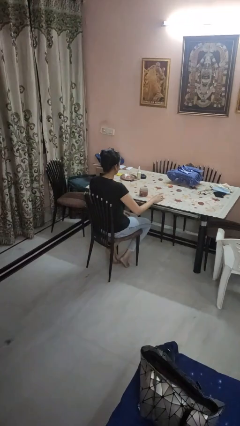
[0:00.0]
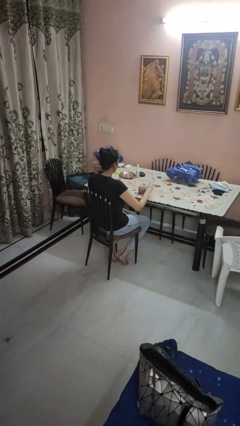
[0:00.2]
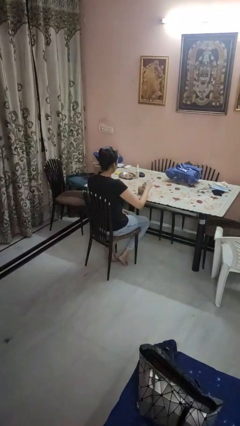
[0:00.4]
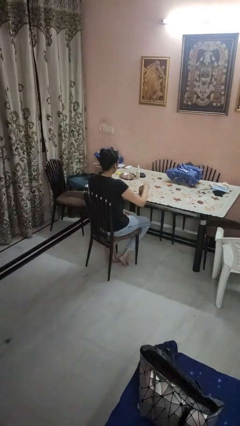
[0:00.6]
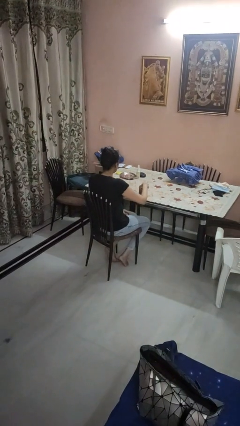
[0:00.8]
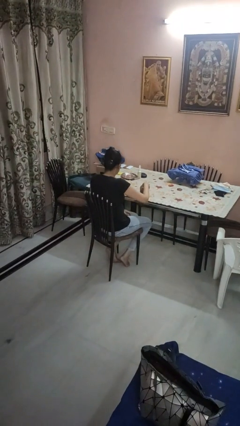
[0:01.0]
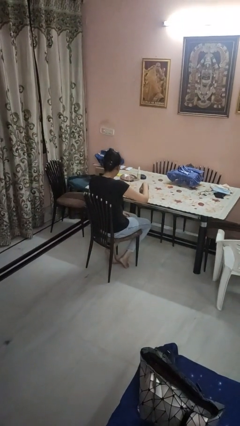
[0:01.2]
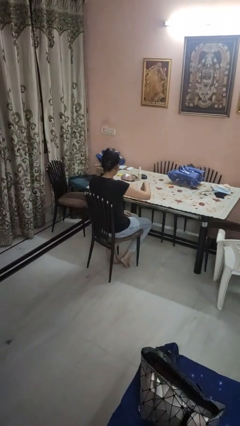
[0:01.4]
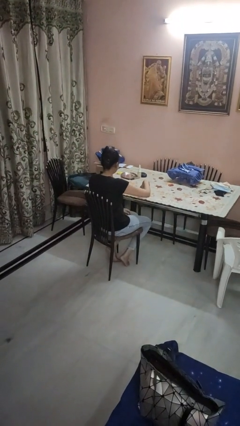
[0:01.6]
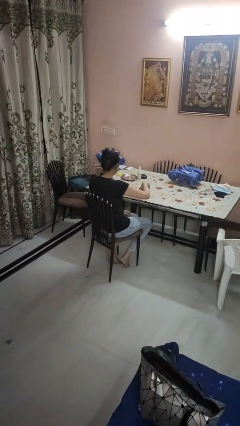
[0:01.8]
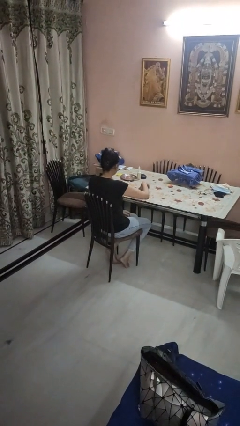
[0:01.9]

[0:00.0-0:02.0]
person closes jar

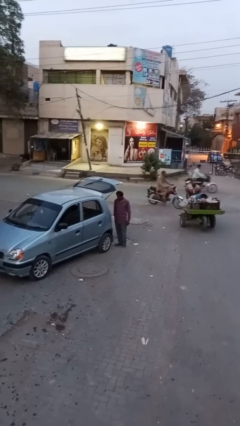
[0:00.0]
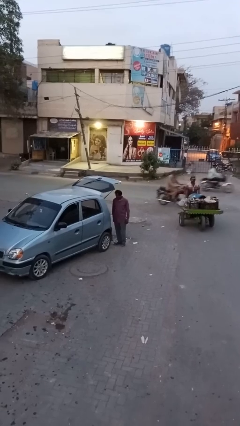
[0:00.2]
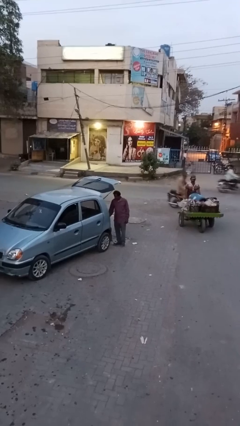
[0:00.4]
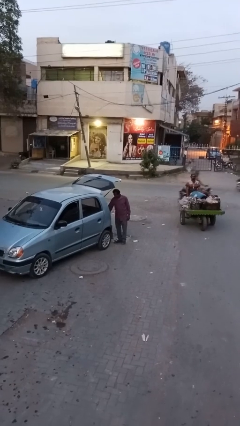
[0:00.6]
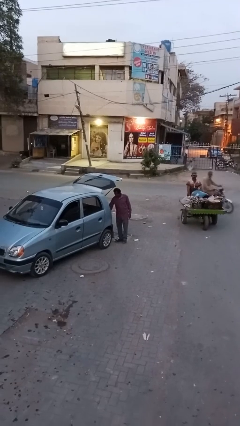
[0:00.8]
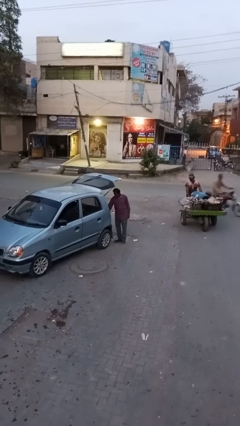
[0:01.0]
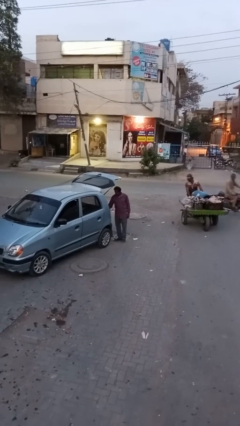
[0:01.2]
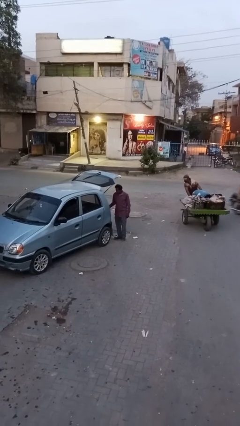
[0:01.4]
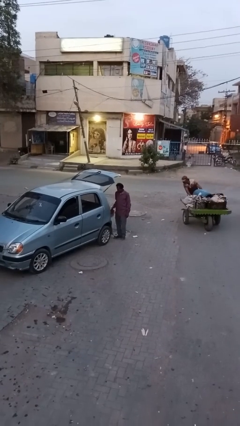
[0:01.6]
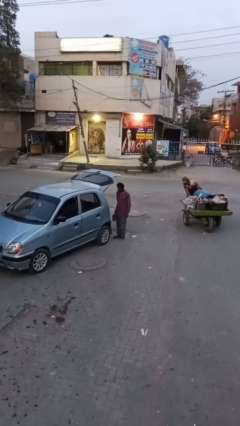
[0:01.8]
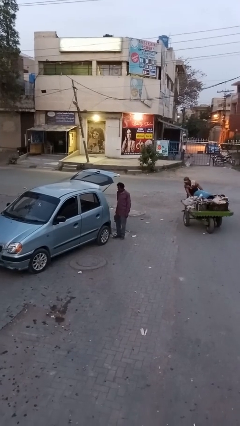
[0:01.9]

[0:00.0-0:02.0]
person unloads car

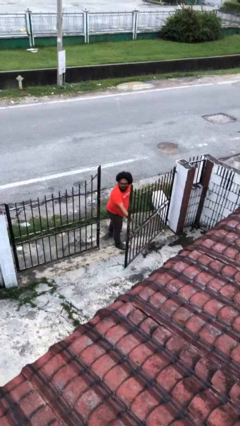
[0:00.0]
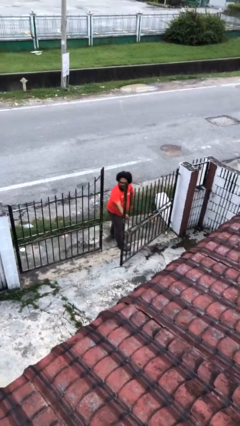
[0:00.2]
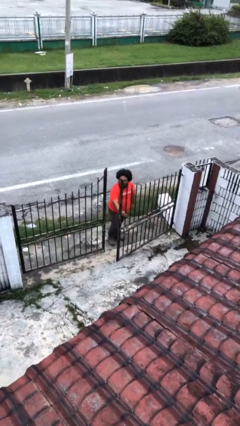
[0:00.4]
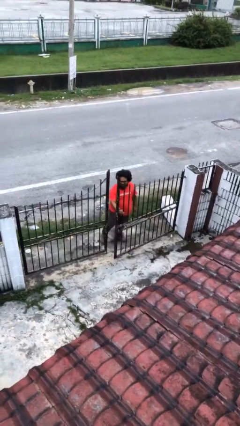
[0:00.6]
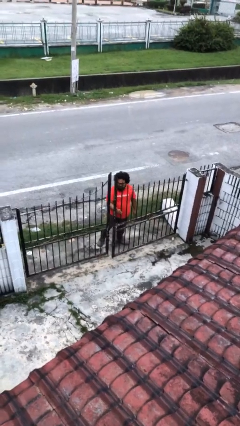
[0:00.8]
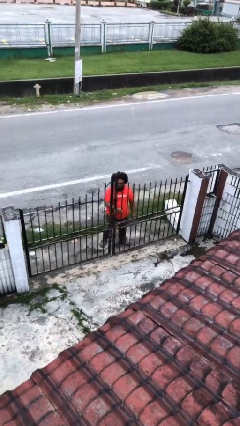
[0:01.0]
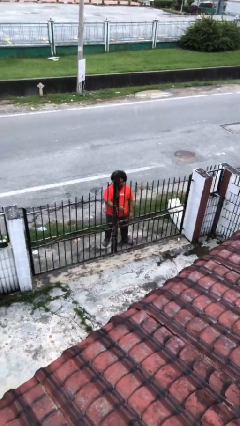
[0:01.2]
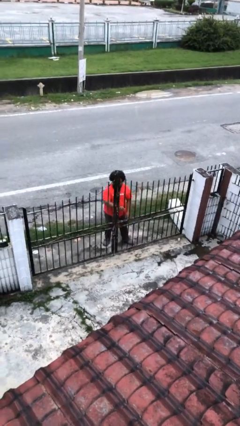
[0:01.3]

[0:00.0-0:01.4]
person closes facility door

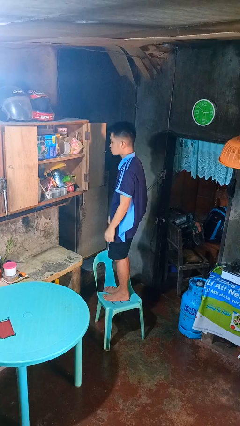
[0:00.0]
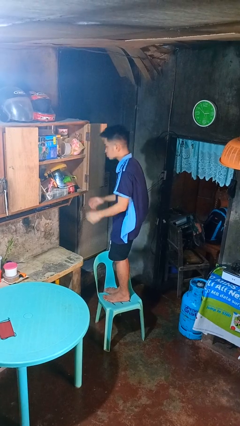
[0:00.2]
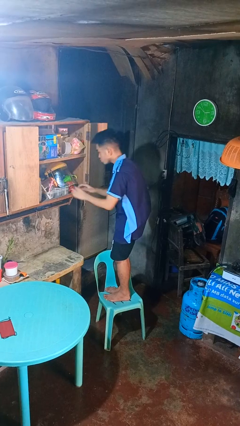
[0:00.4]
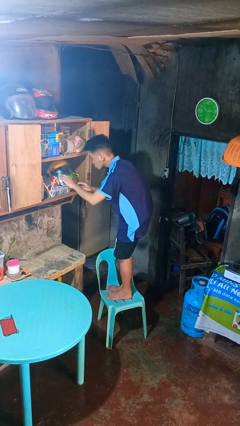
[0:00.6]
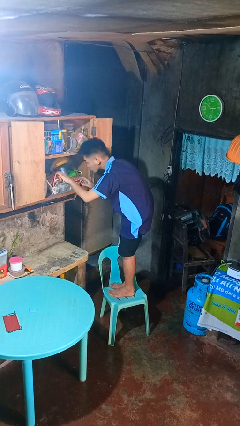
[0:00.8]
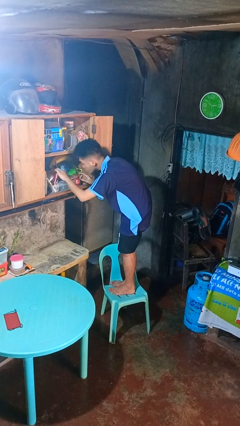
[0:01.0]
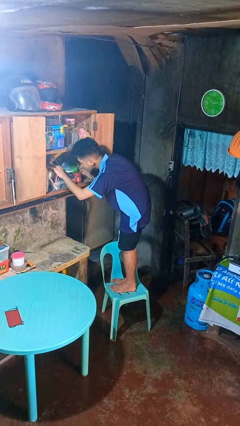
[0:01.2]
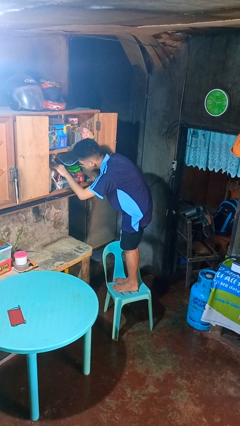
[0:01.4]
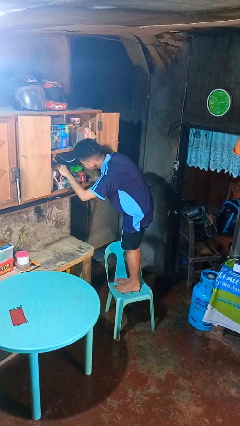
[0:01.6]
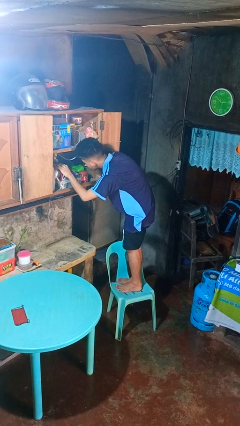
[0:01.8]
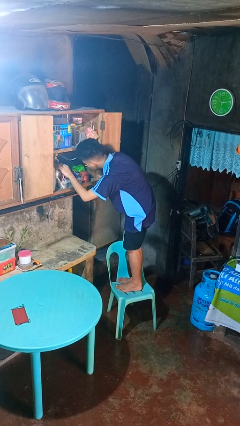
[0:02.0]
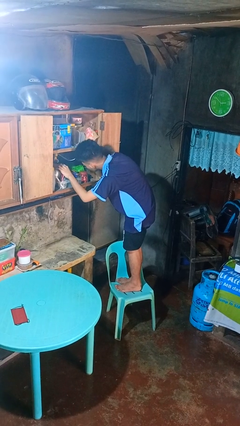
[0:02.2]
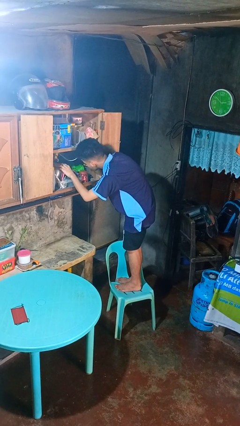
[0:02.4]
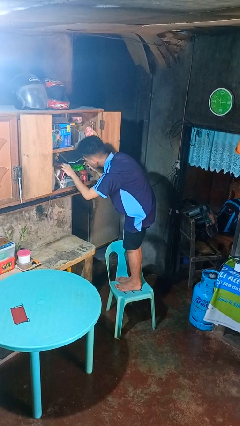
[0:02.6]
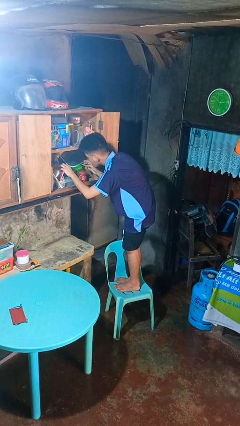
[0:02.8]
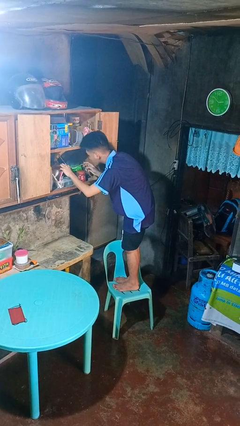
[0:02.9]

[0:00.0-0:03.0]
person searches in cabinet

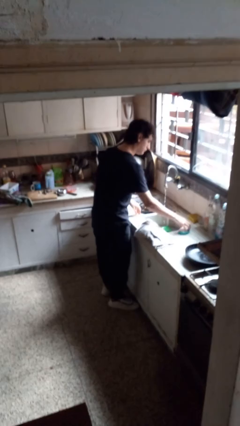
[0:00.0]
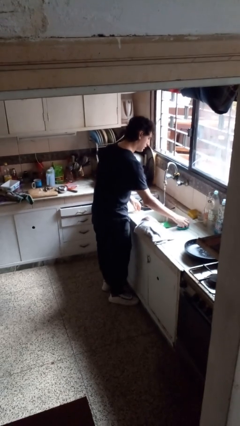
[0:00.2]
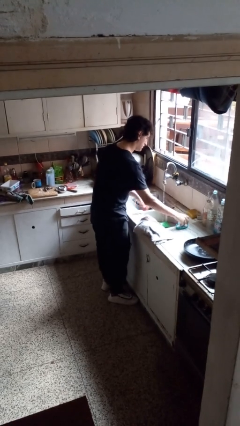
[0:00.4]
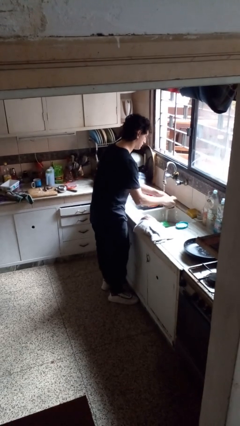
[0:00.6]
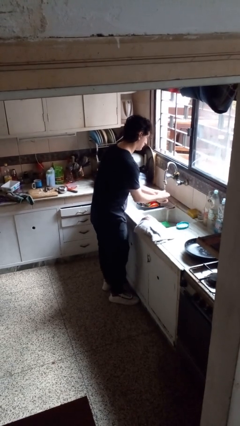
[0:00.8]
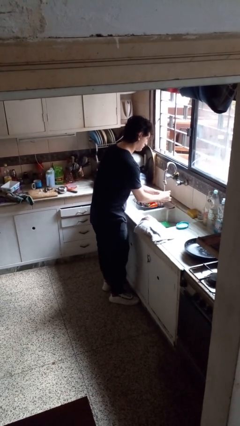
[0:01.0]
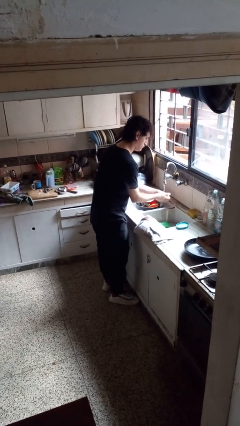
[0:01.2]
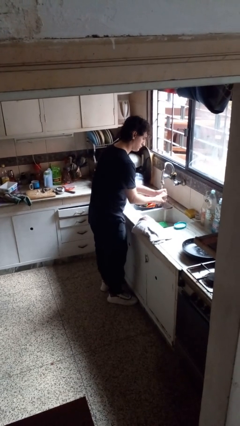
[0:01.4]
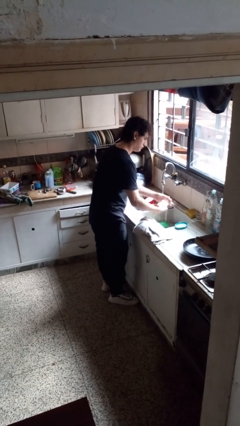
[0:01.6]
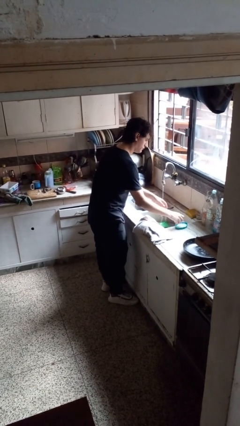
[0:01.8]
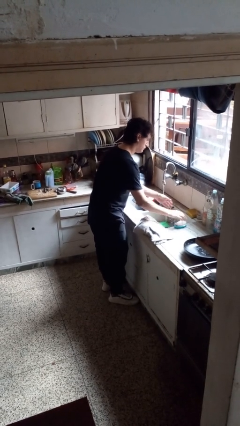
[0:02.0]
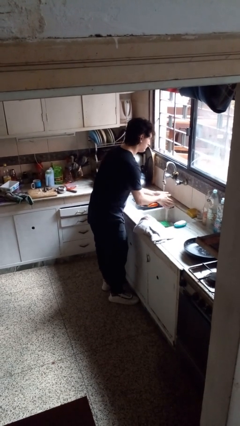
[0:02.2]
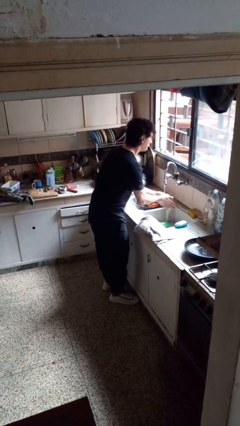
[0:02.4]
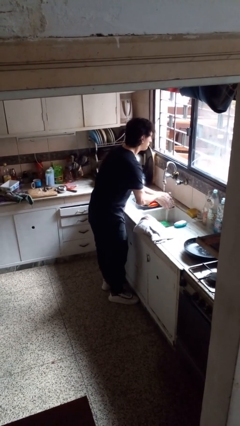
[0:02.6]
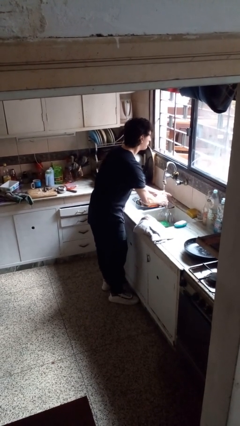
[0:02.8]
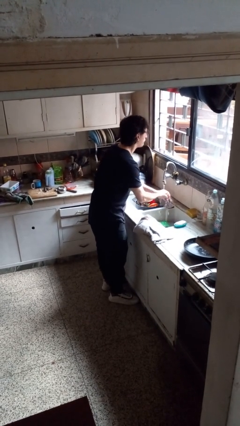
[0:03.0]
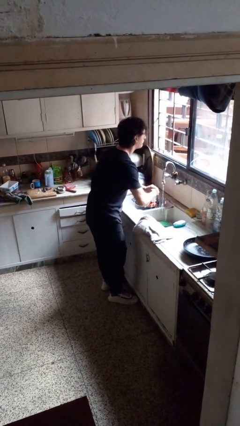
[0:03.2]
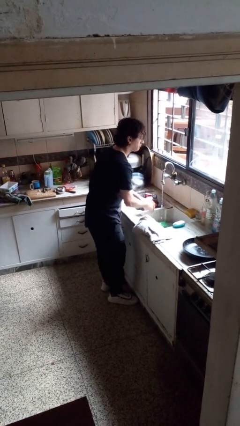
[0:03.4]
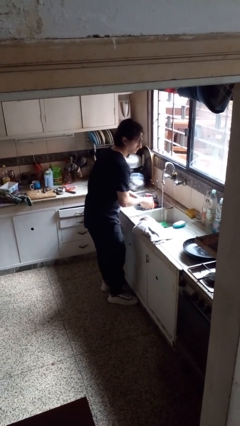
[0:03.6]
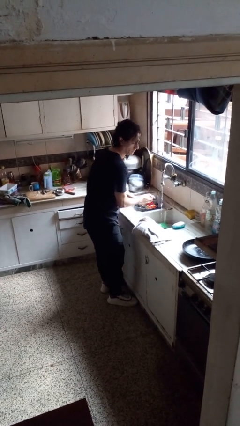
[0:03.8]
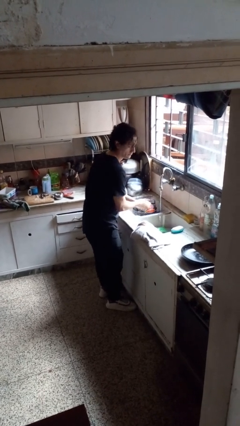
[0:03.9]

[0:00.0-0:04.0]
person washes hands

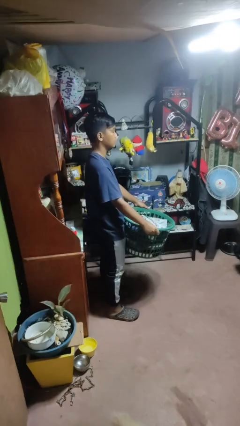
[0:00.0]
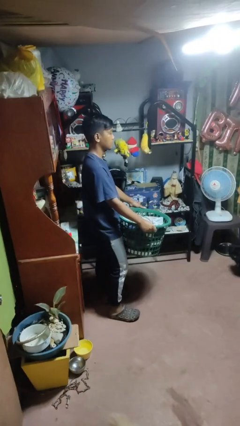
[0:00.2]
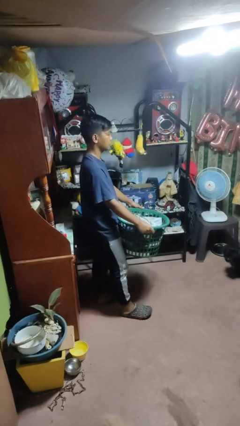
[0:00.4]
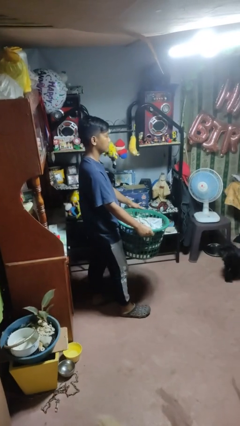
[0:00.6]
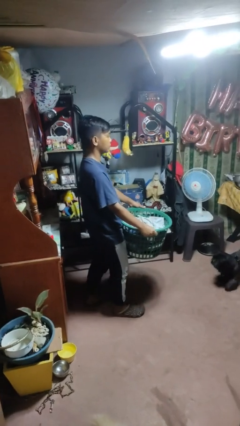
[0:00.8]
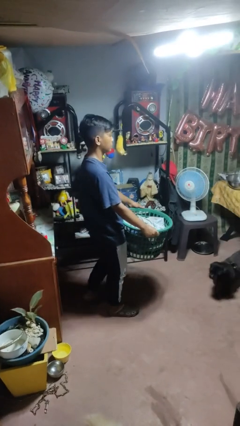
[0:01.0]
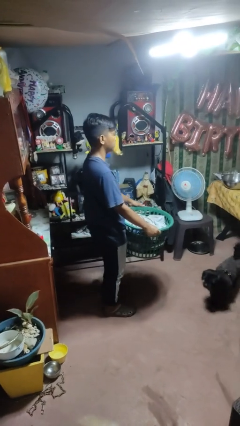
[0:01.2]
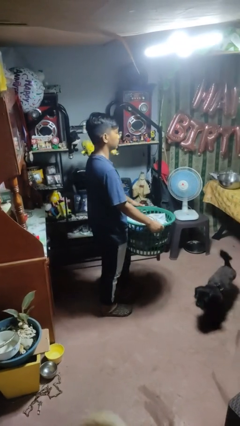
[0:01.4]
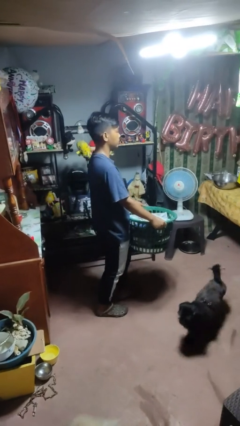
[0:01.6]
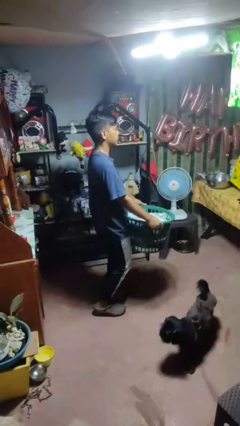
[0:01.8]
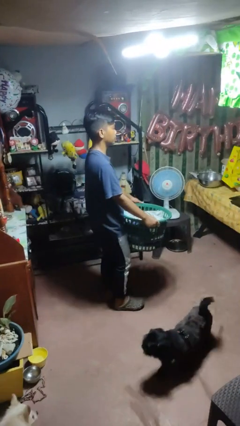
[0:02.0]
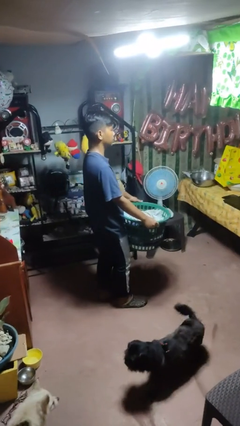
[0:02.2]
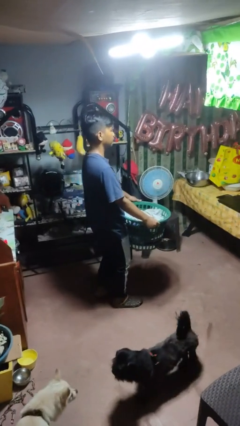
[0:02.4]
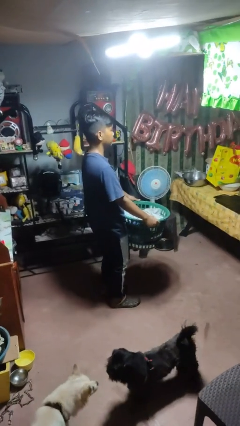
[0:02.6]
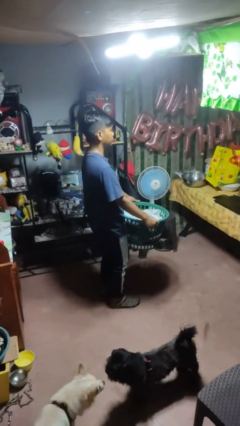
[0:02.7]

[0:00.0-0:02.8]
person carries laundry basket

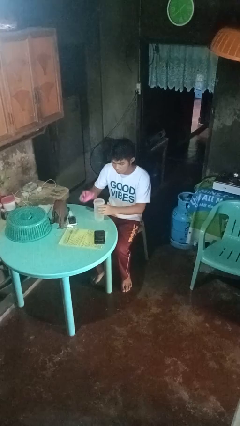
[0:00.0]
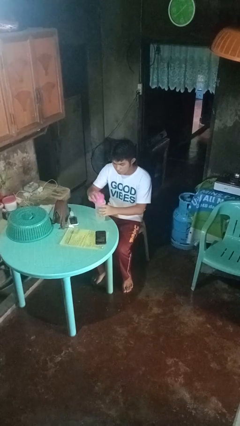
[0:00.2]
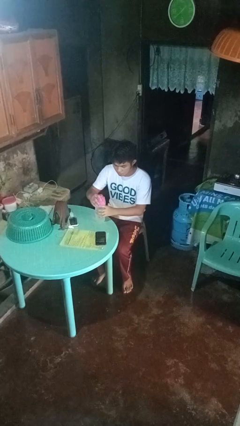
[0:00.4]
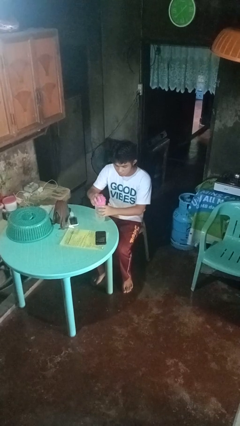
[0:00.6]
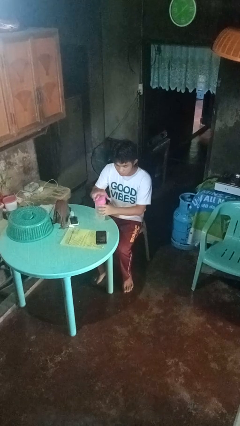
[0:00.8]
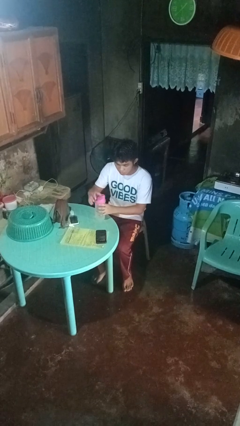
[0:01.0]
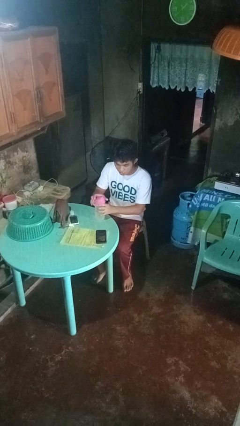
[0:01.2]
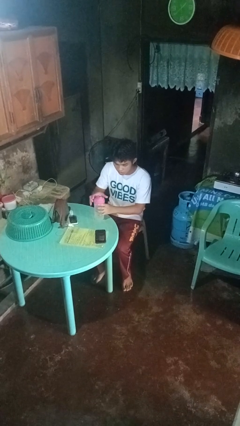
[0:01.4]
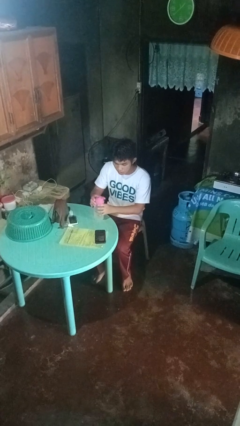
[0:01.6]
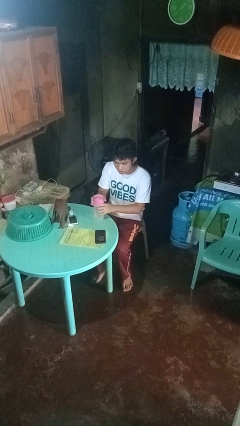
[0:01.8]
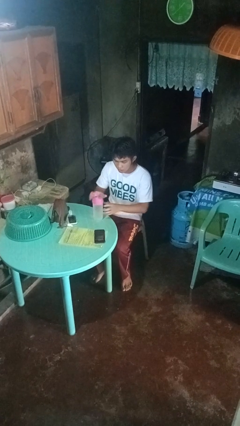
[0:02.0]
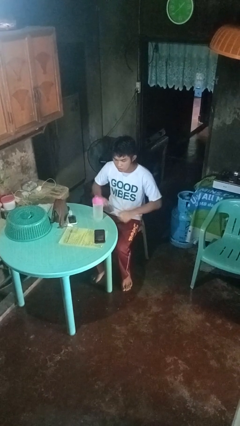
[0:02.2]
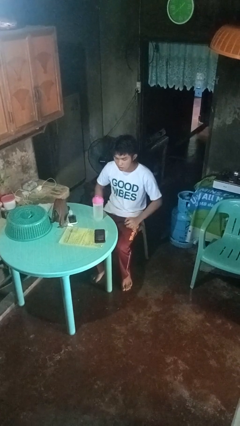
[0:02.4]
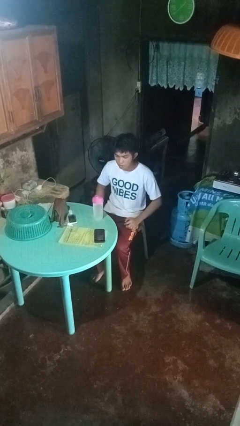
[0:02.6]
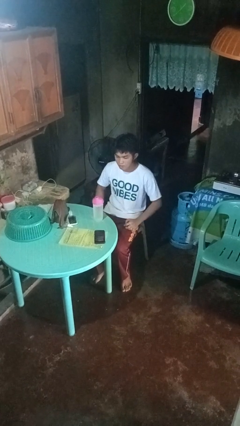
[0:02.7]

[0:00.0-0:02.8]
person screws lid to bottle
